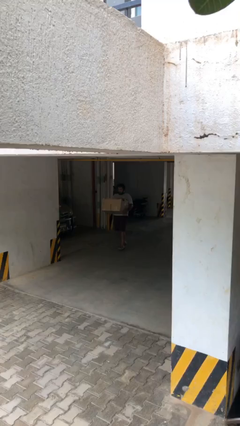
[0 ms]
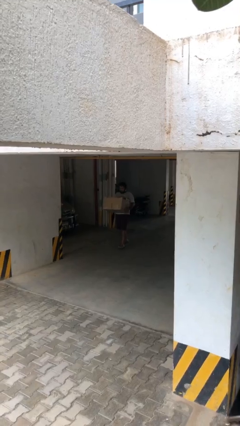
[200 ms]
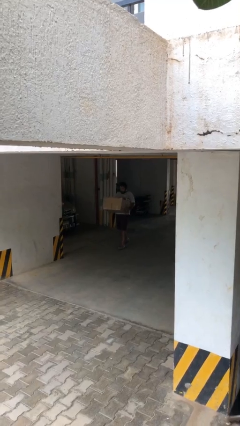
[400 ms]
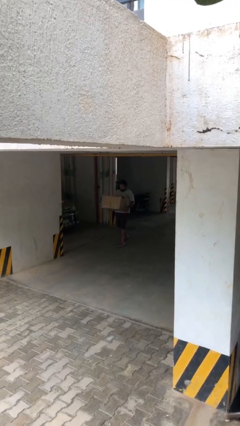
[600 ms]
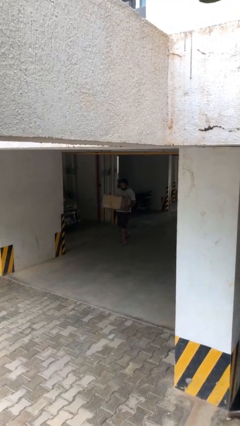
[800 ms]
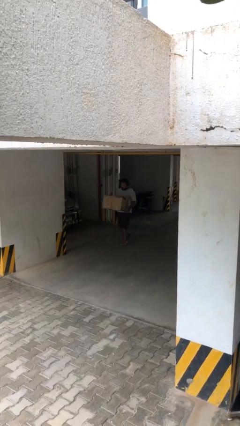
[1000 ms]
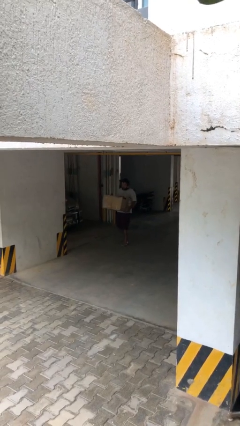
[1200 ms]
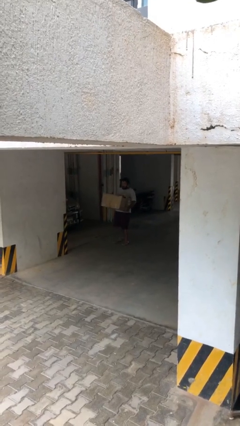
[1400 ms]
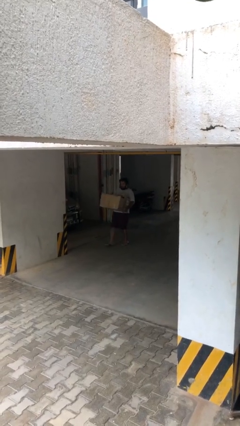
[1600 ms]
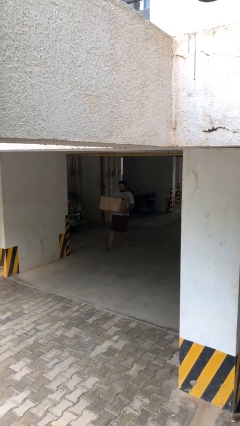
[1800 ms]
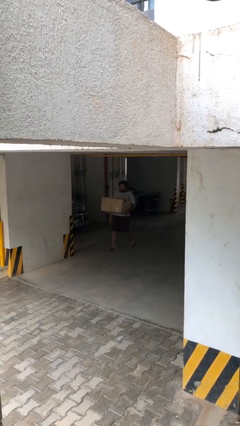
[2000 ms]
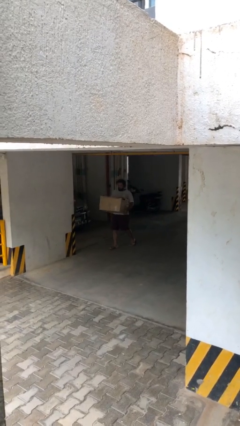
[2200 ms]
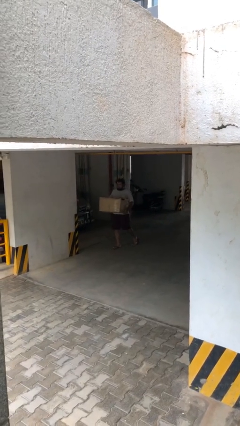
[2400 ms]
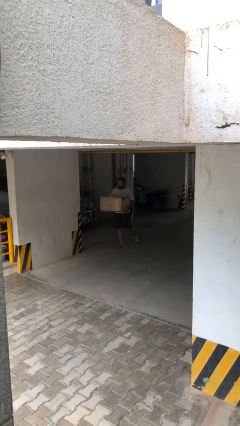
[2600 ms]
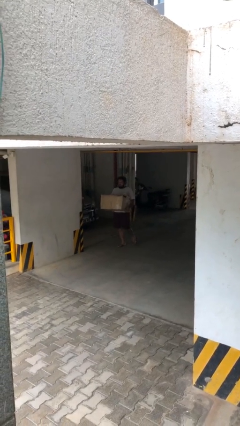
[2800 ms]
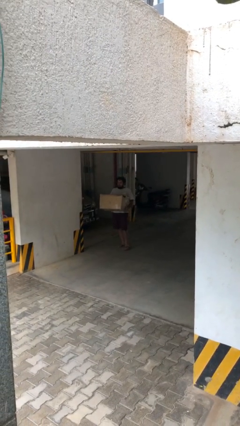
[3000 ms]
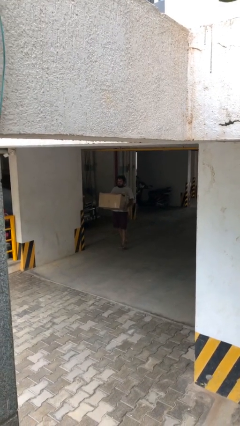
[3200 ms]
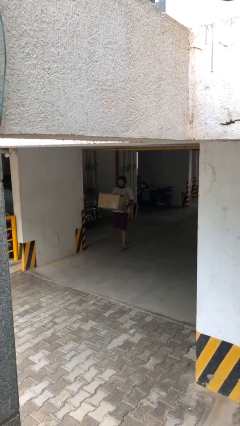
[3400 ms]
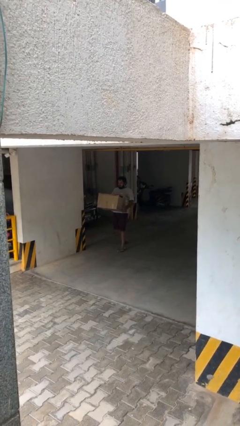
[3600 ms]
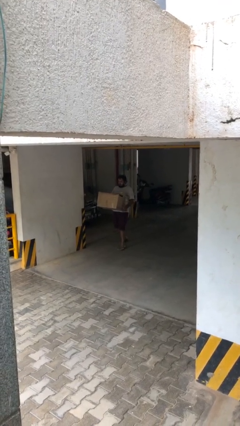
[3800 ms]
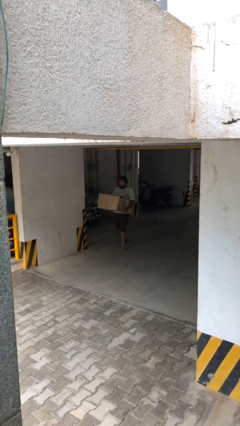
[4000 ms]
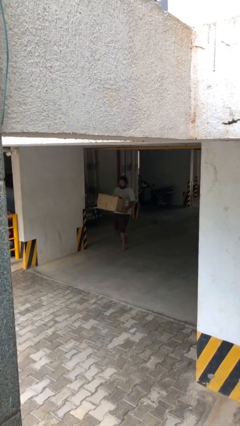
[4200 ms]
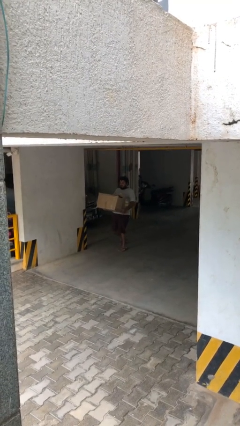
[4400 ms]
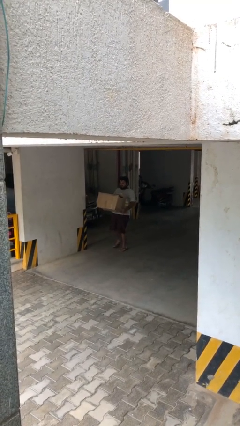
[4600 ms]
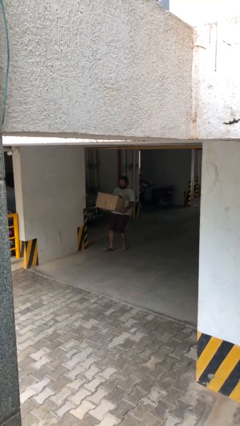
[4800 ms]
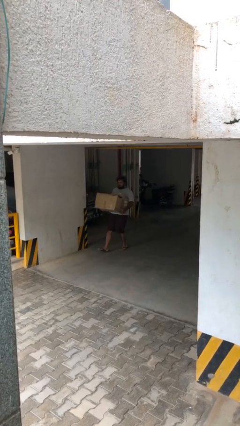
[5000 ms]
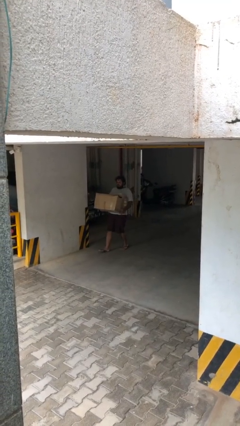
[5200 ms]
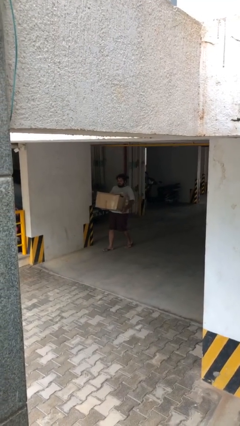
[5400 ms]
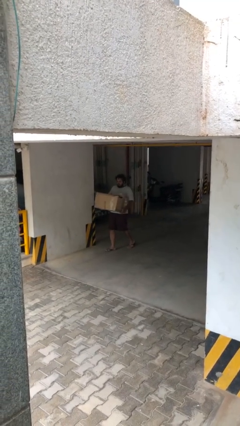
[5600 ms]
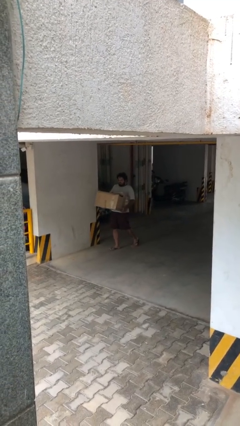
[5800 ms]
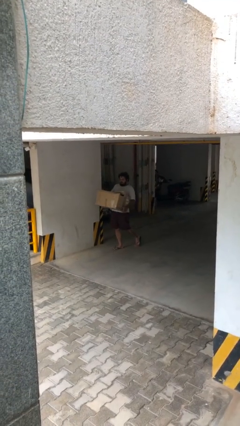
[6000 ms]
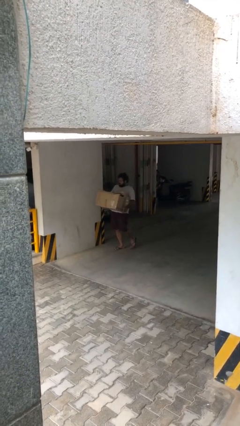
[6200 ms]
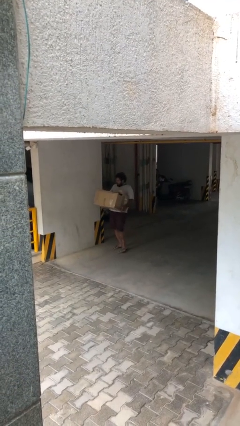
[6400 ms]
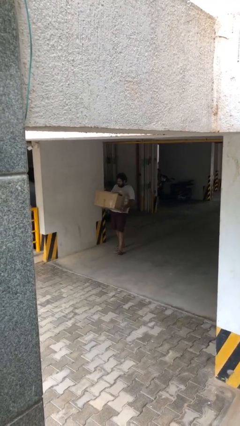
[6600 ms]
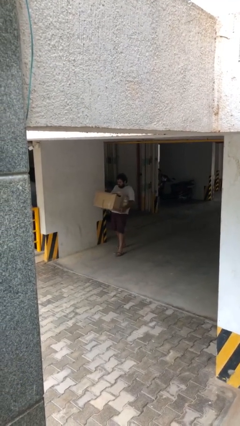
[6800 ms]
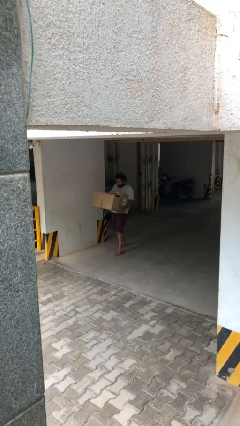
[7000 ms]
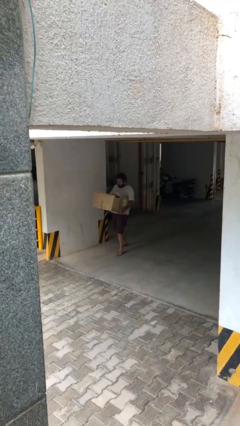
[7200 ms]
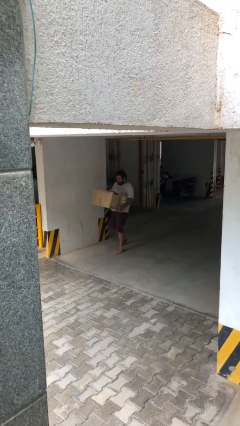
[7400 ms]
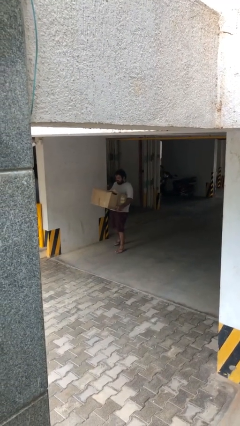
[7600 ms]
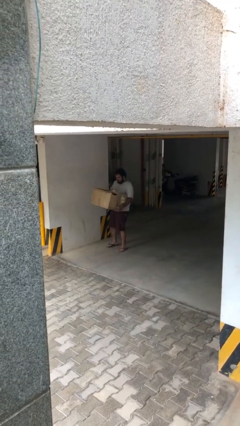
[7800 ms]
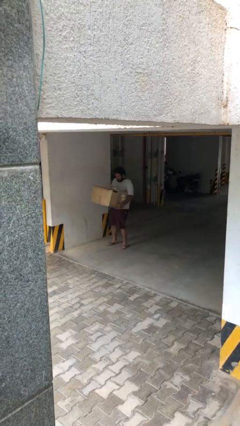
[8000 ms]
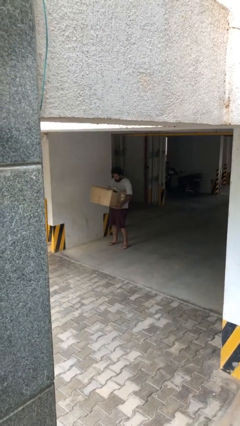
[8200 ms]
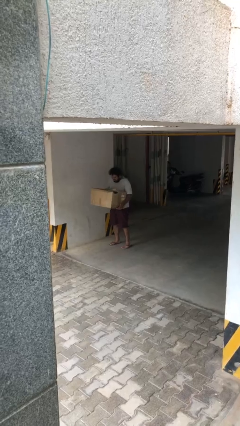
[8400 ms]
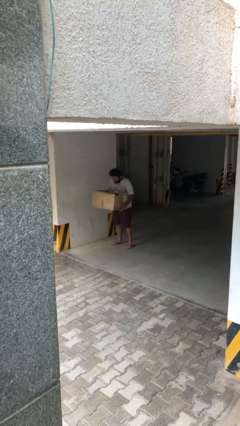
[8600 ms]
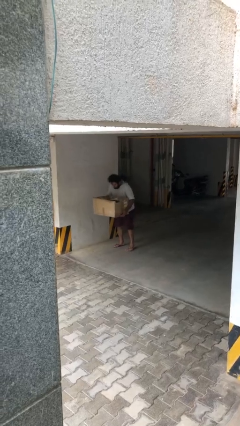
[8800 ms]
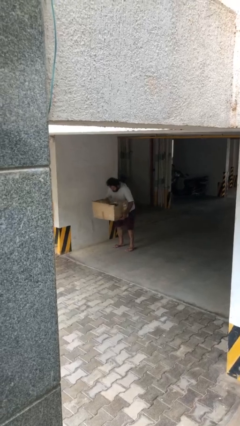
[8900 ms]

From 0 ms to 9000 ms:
person carries heavy object

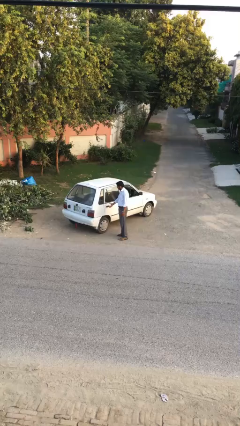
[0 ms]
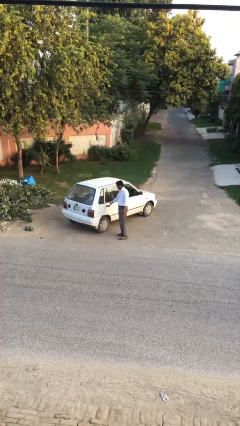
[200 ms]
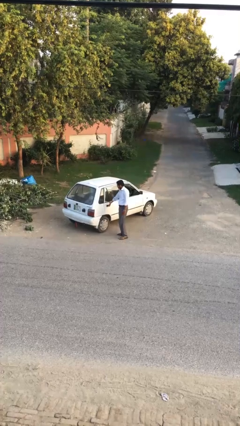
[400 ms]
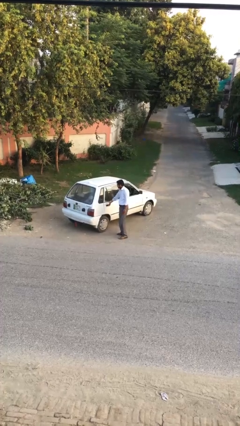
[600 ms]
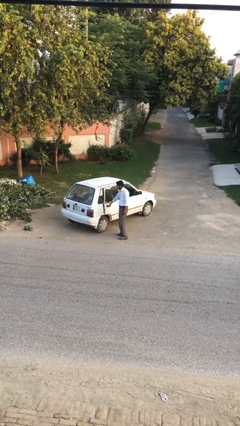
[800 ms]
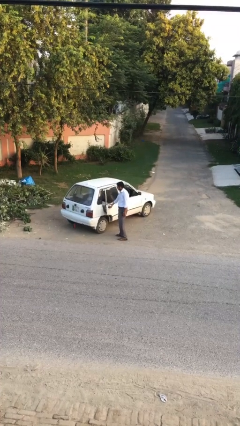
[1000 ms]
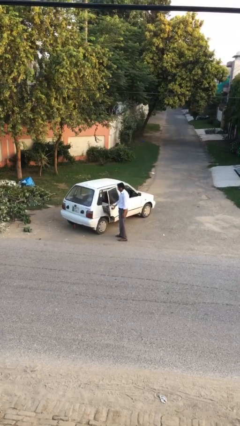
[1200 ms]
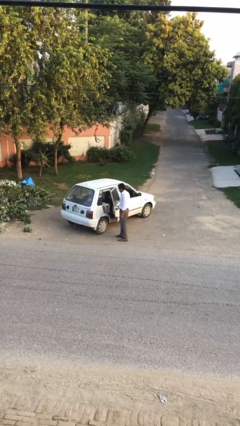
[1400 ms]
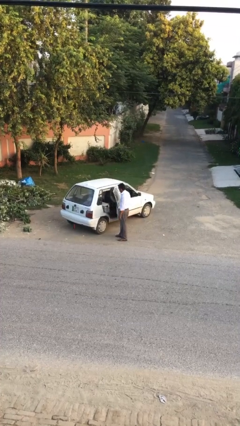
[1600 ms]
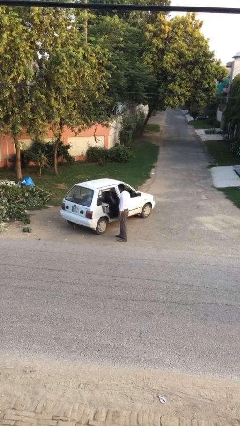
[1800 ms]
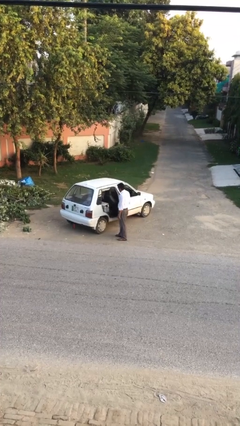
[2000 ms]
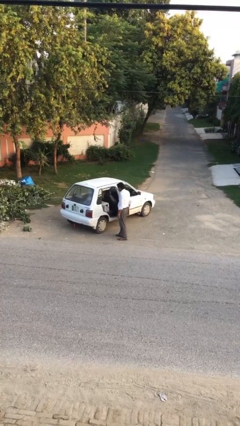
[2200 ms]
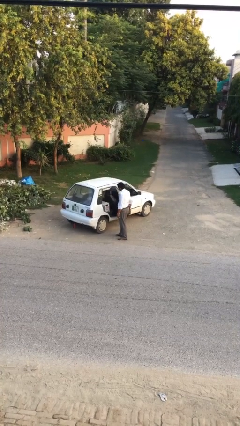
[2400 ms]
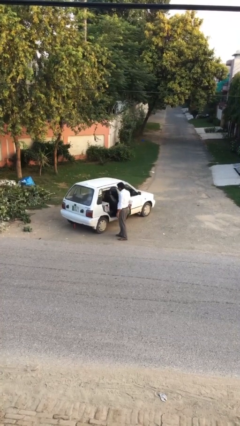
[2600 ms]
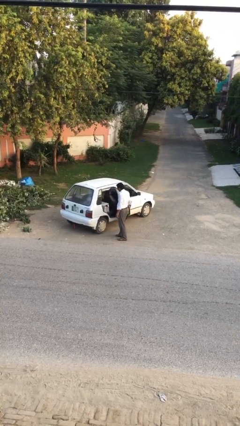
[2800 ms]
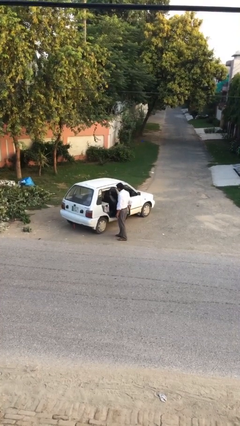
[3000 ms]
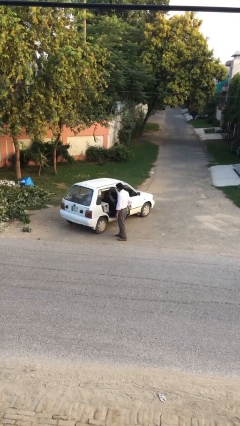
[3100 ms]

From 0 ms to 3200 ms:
person opens car door

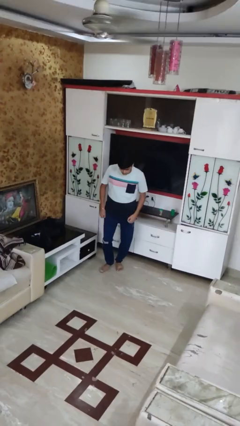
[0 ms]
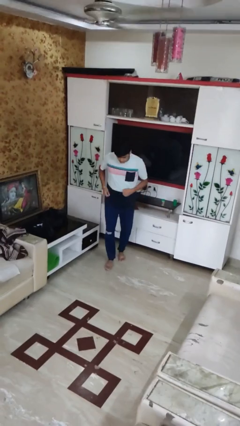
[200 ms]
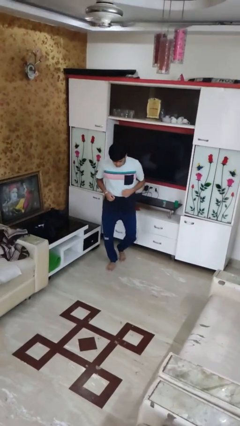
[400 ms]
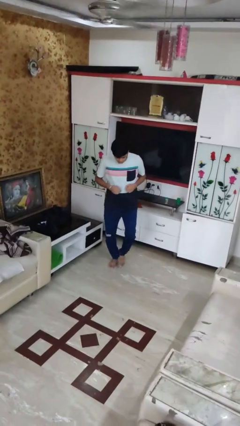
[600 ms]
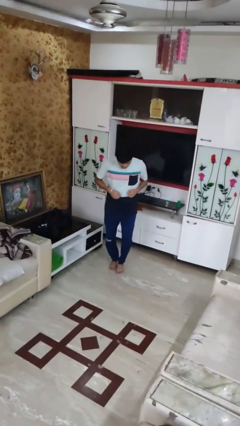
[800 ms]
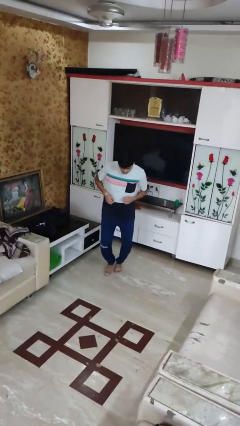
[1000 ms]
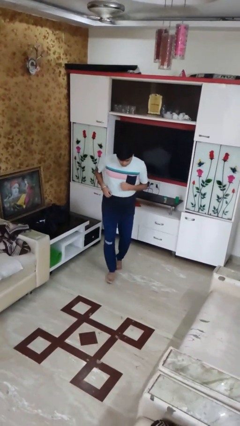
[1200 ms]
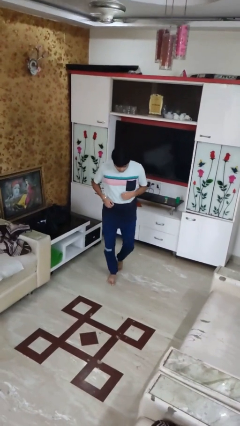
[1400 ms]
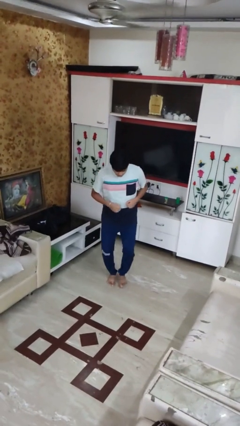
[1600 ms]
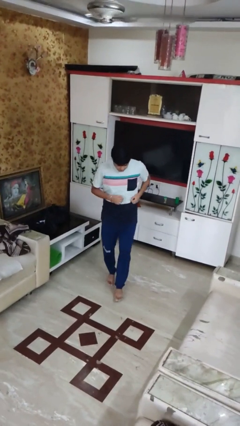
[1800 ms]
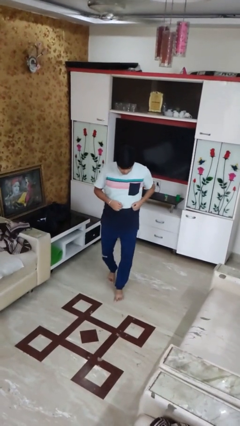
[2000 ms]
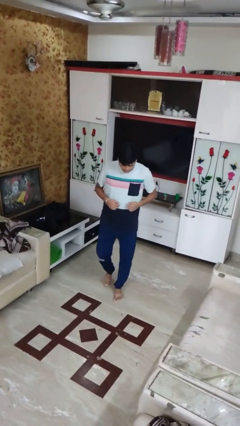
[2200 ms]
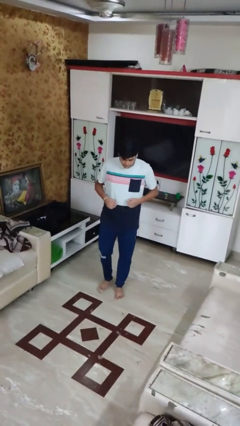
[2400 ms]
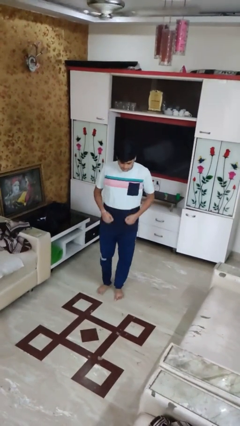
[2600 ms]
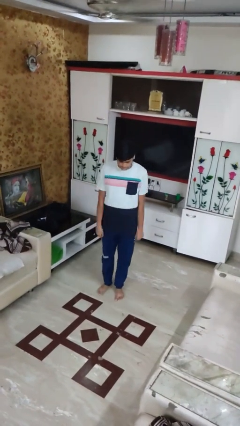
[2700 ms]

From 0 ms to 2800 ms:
person walks tiptoe

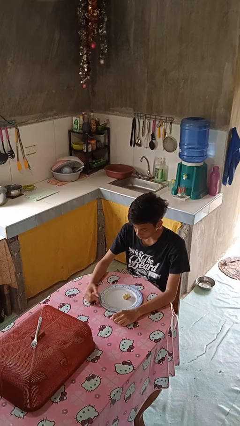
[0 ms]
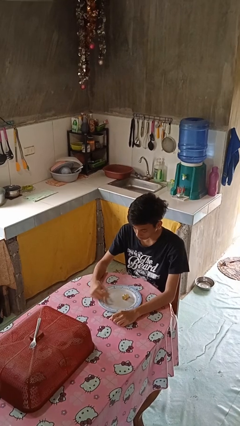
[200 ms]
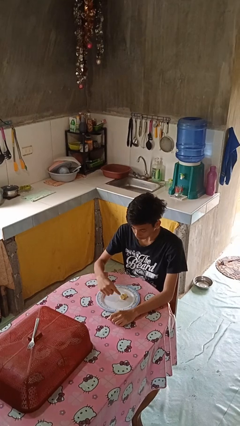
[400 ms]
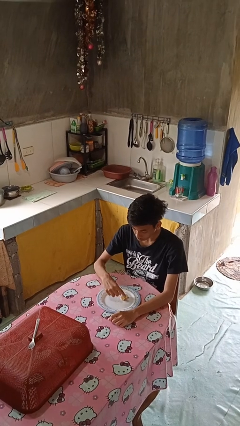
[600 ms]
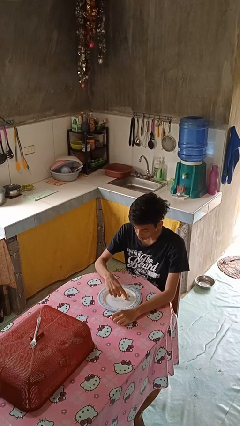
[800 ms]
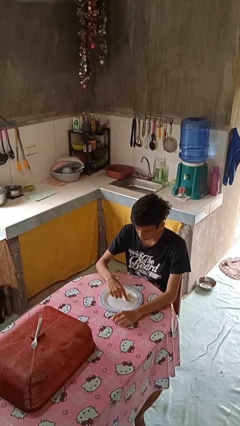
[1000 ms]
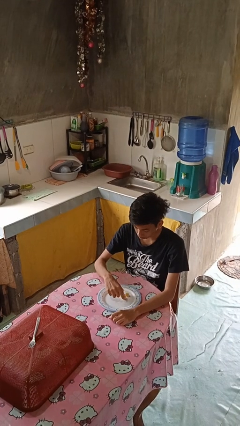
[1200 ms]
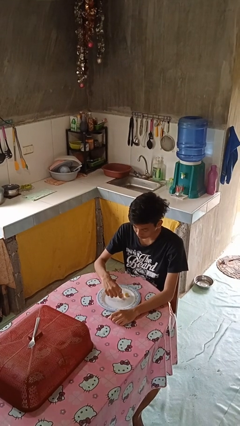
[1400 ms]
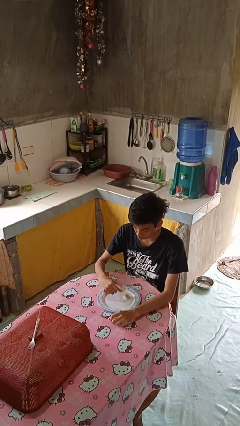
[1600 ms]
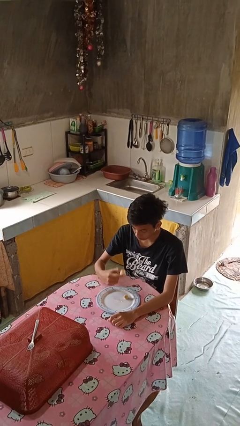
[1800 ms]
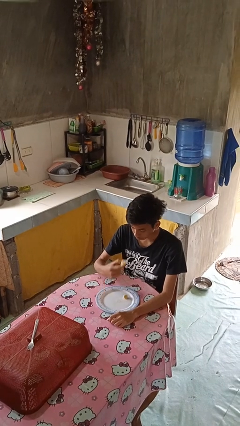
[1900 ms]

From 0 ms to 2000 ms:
person eats with hands

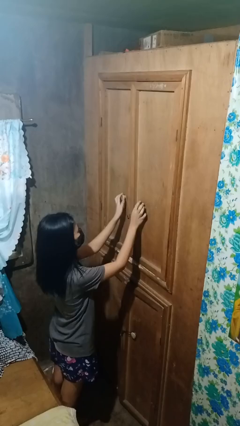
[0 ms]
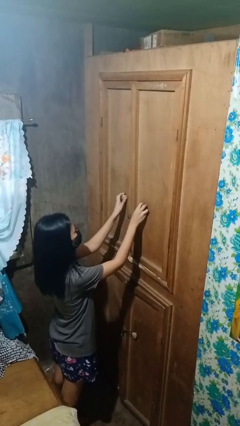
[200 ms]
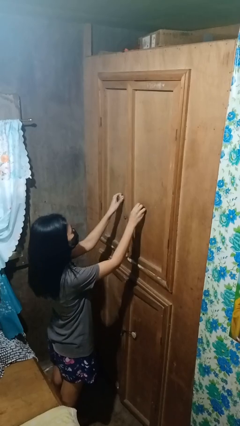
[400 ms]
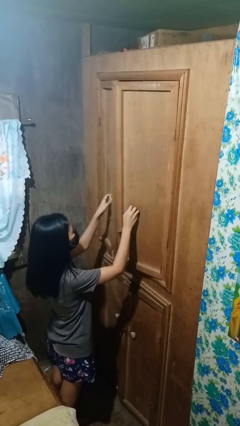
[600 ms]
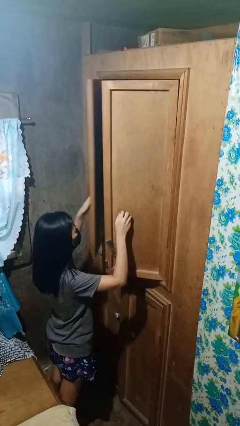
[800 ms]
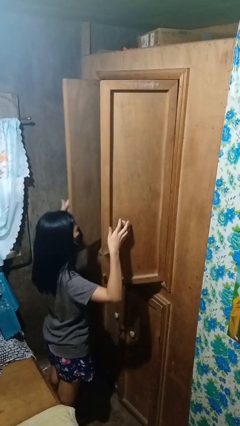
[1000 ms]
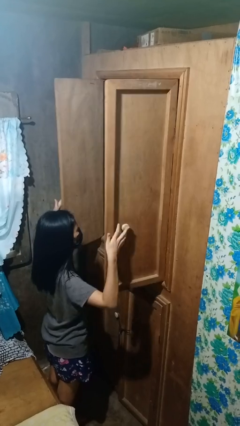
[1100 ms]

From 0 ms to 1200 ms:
person opens closet door
